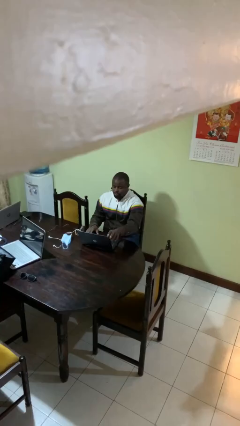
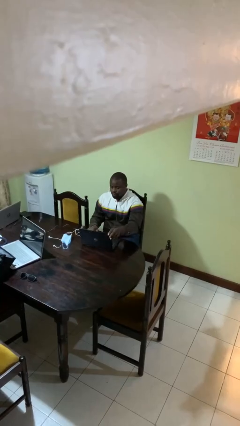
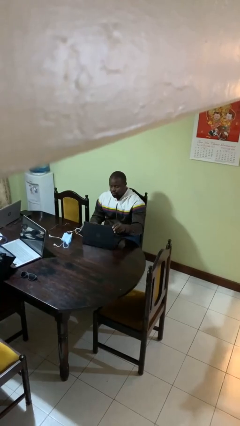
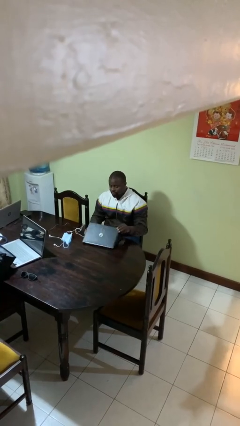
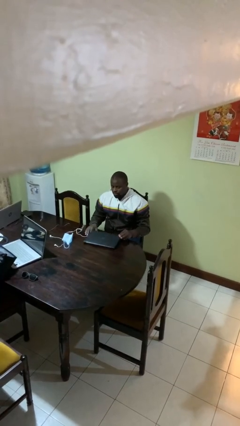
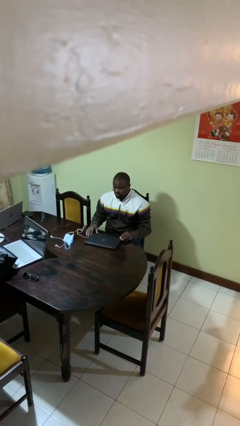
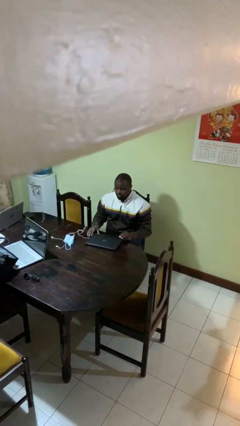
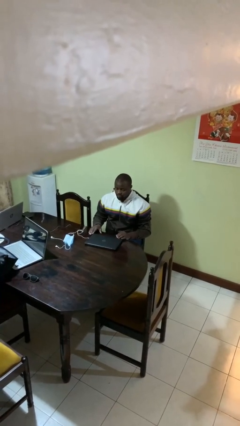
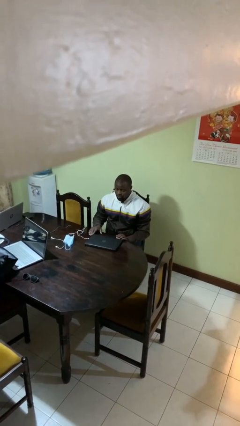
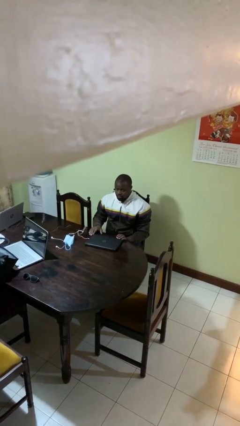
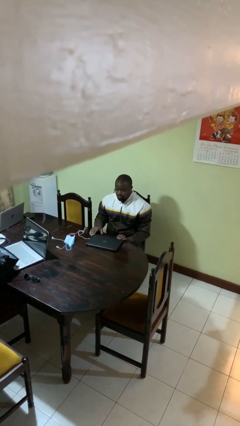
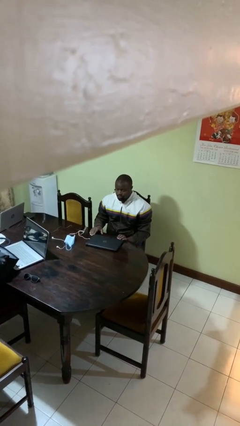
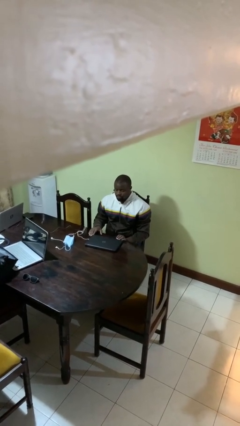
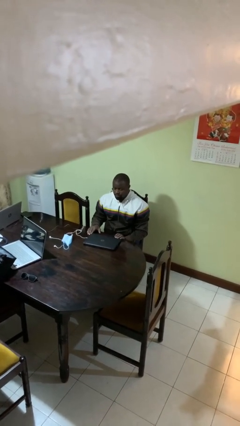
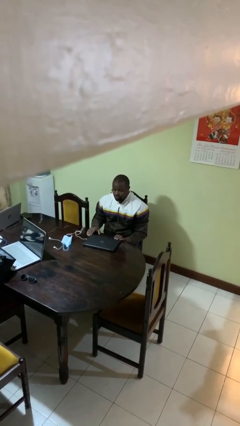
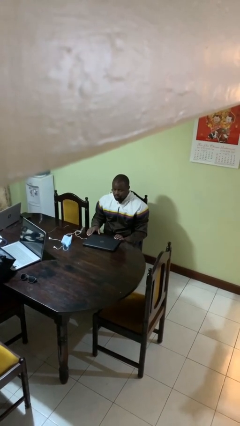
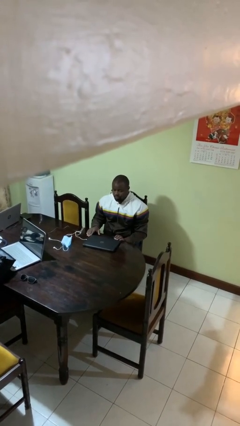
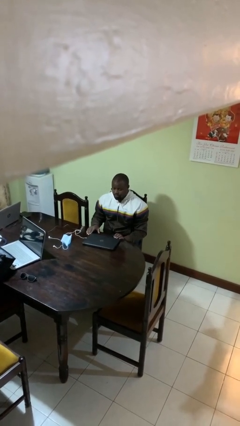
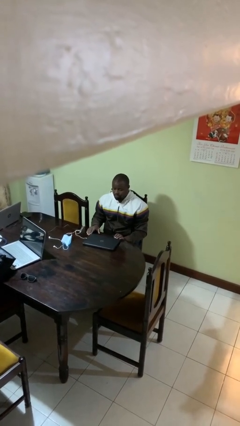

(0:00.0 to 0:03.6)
person closes laptop

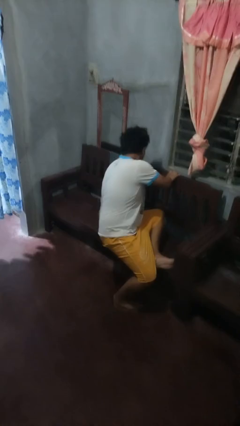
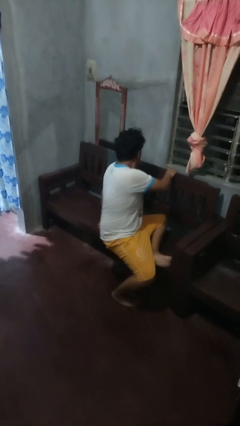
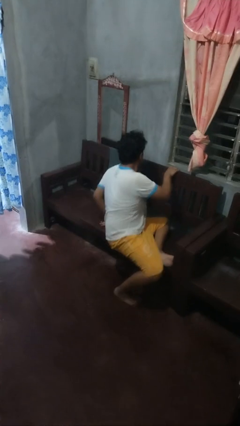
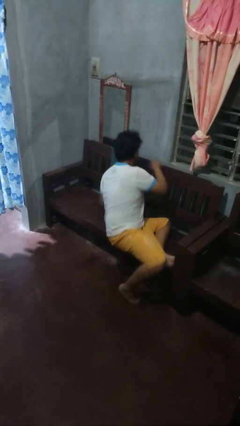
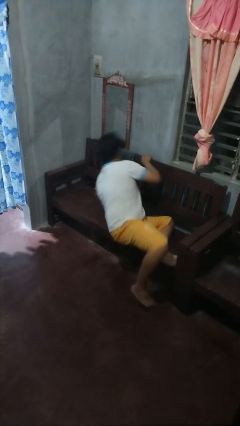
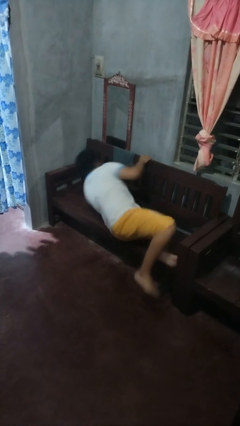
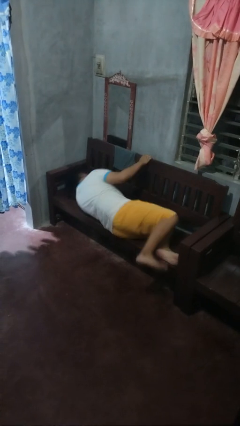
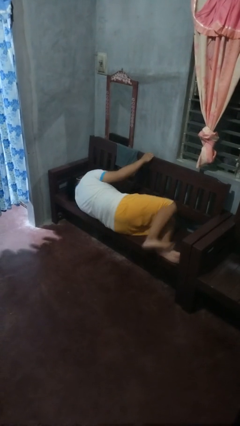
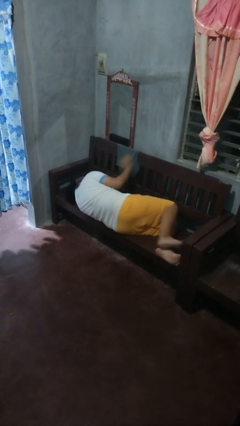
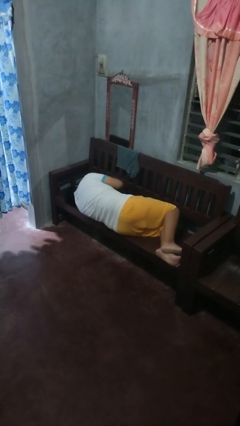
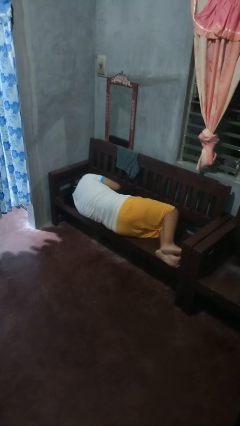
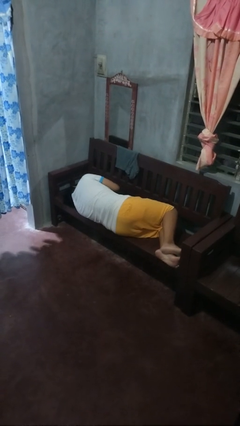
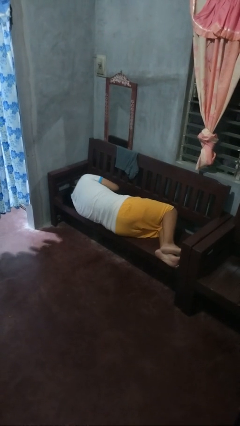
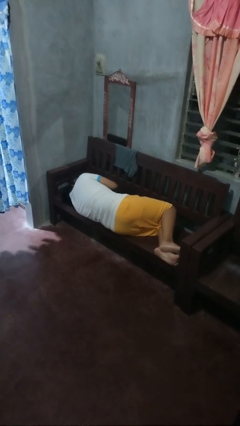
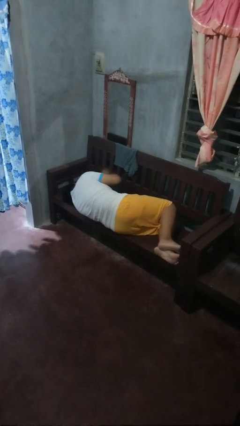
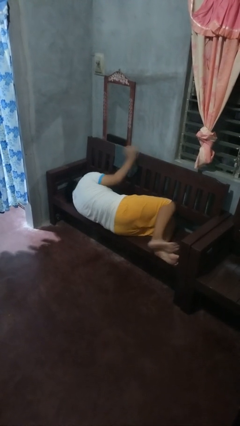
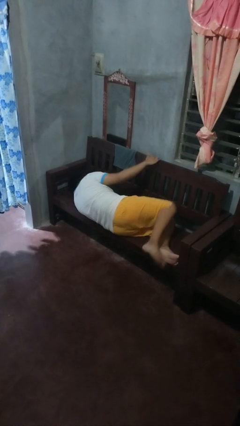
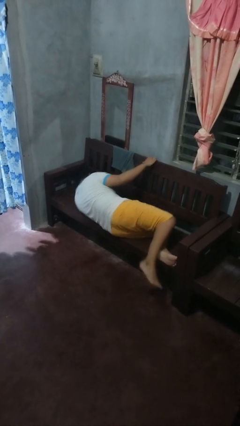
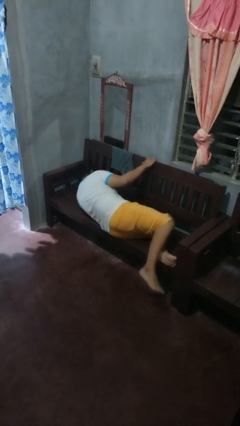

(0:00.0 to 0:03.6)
person lies down on couch

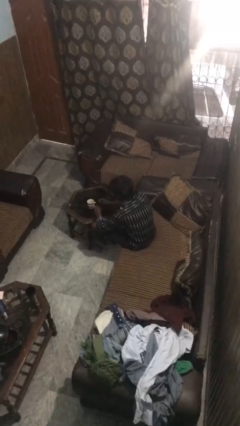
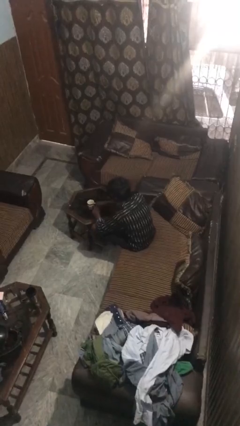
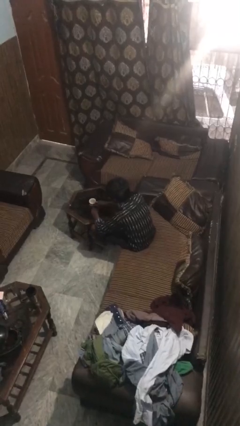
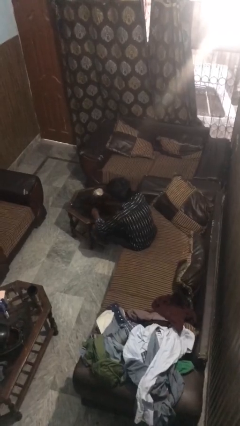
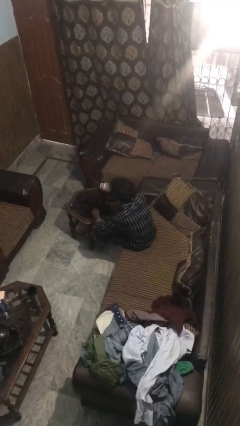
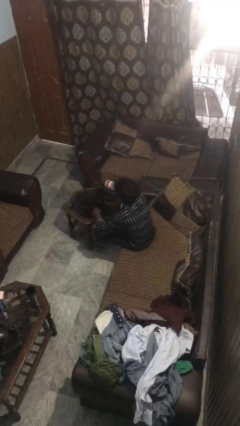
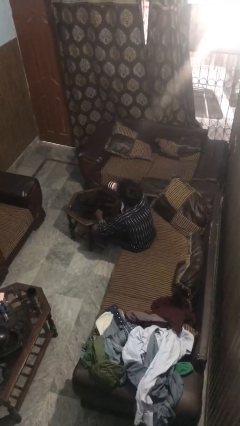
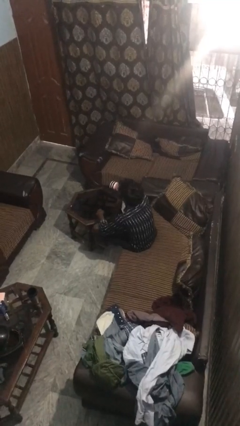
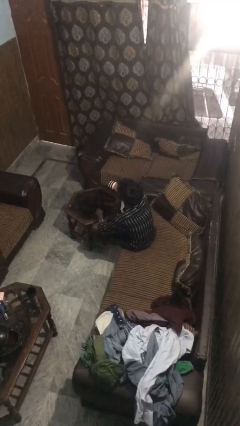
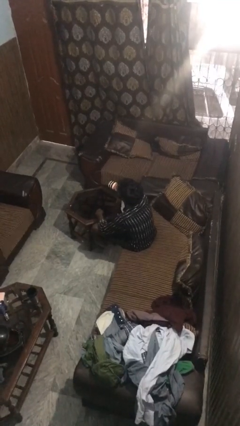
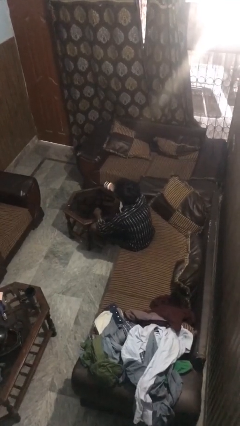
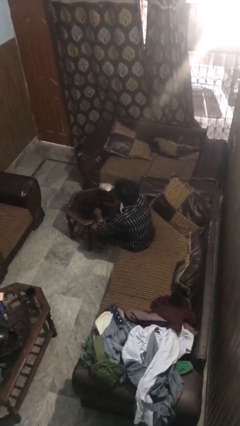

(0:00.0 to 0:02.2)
person drinks from cup

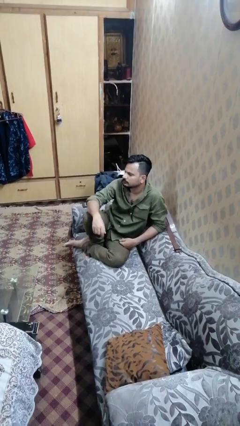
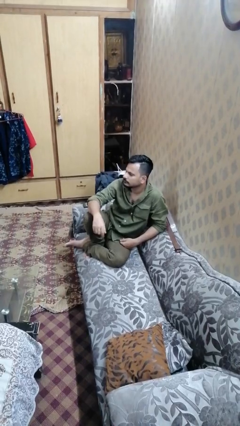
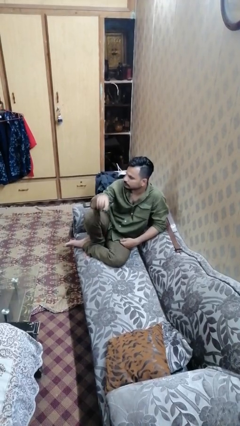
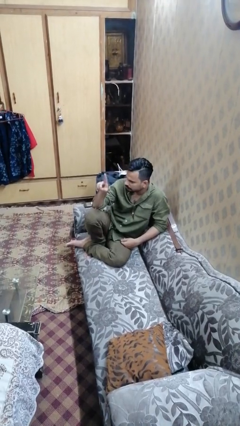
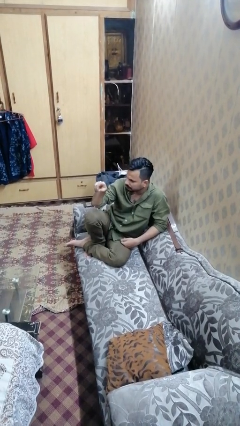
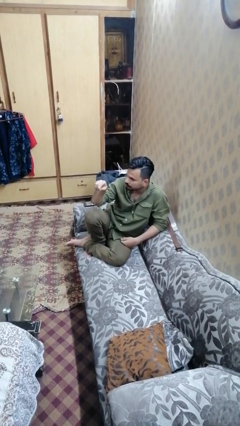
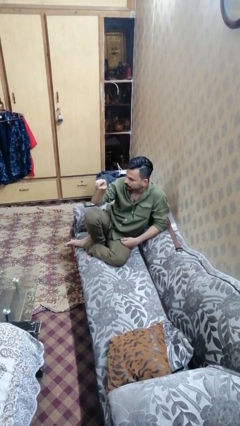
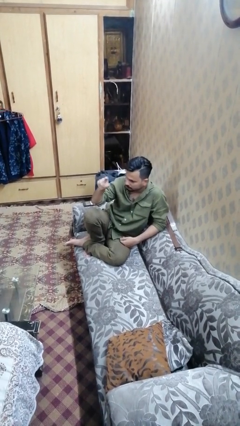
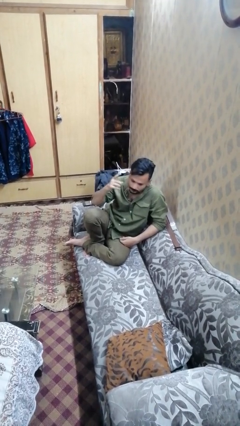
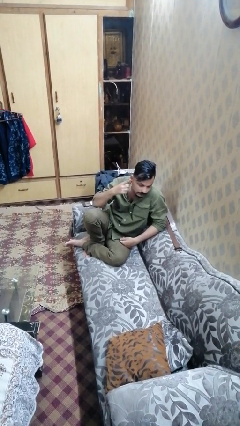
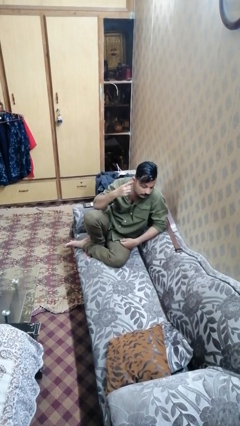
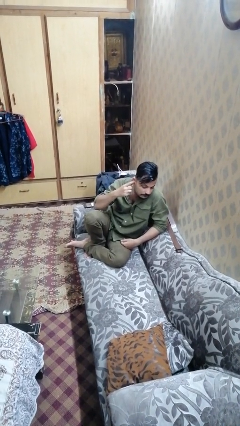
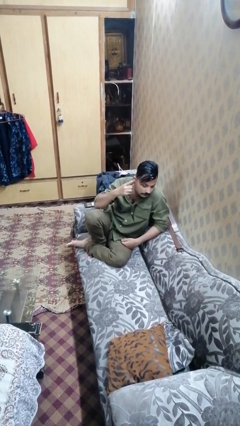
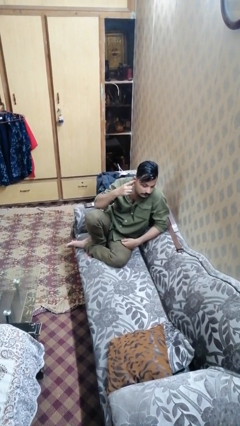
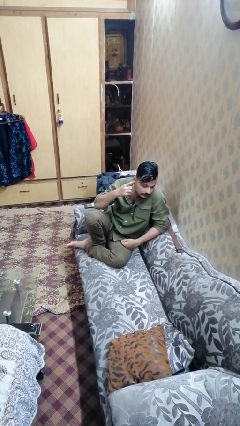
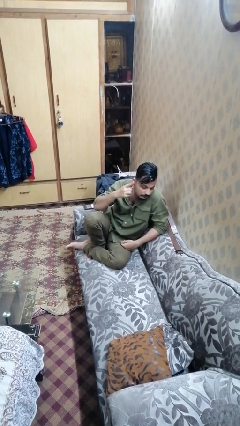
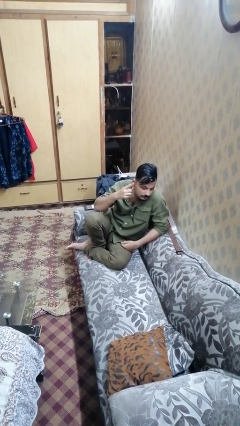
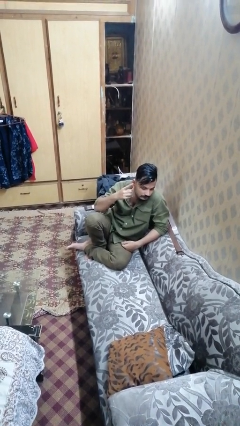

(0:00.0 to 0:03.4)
person gestures listen closely

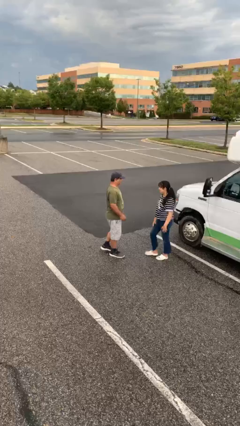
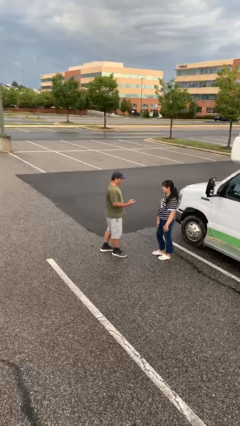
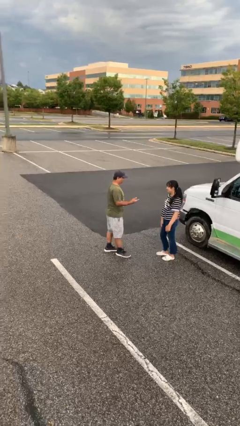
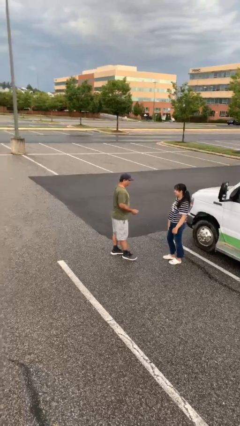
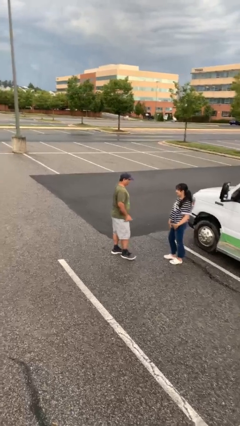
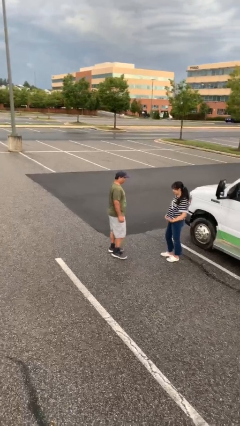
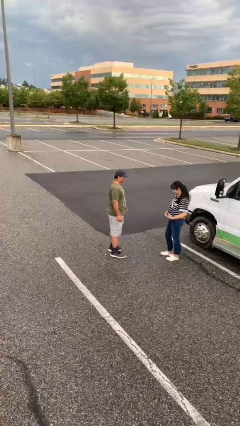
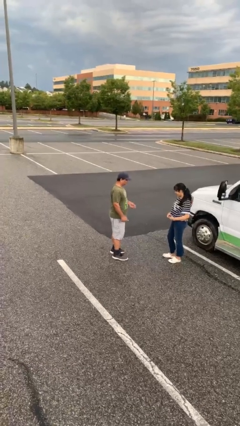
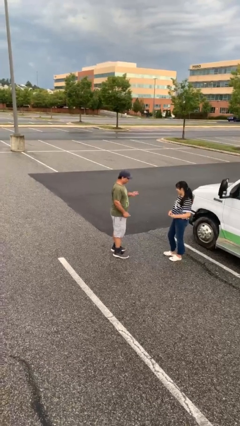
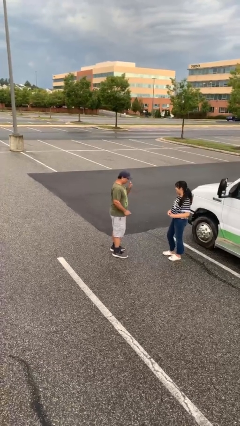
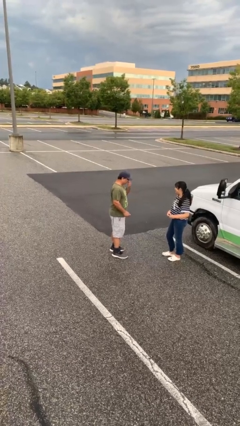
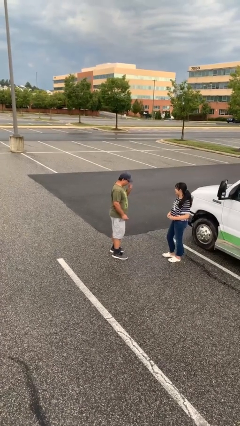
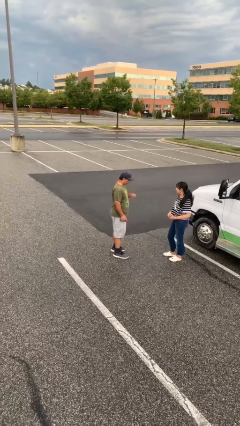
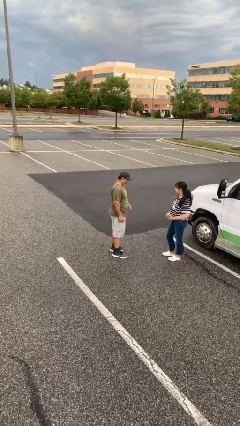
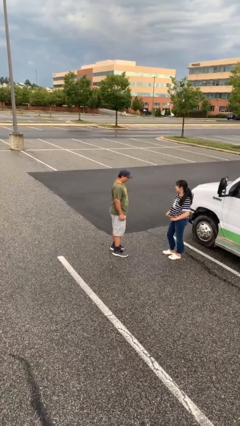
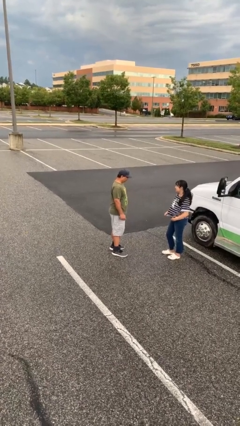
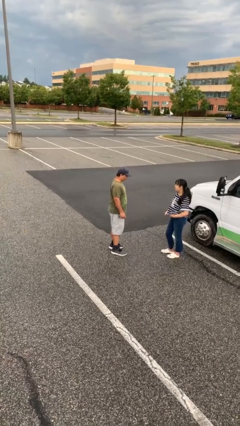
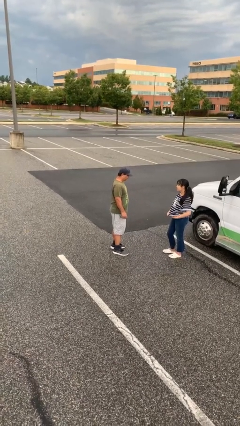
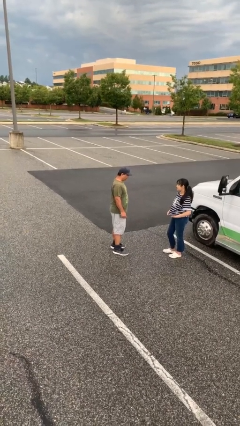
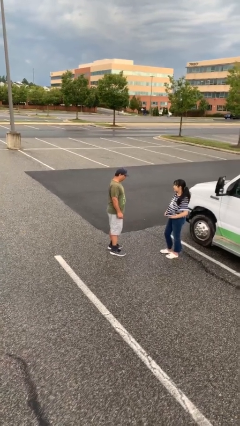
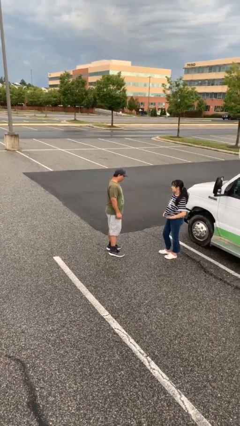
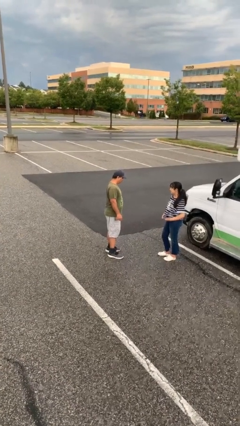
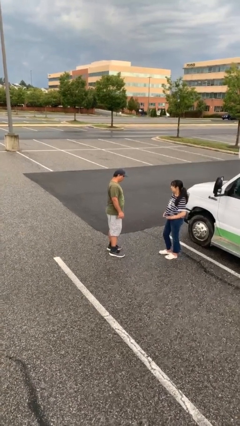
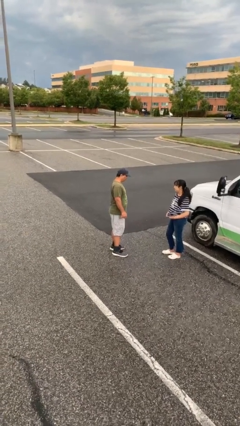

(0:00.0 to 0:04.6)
person talks to person
